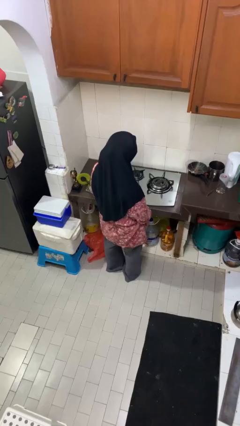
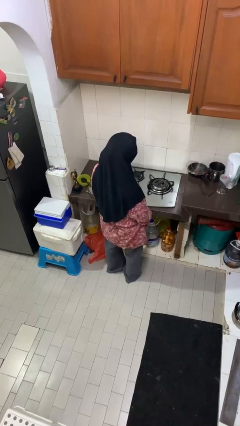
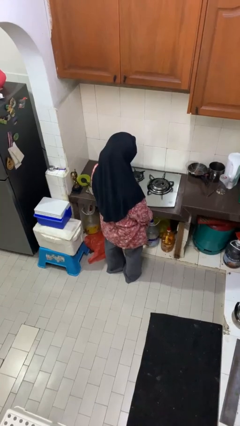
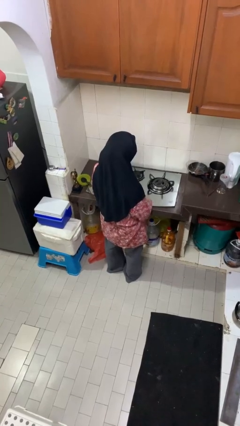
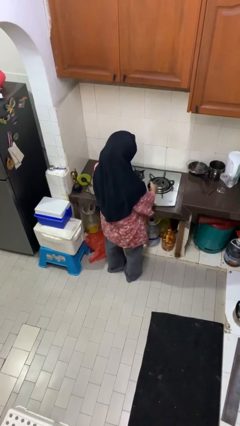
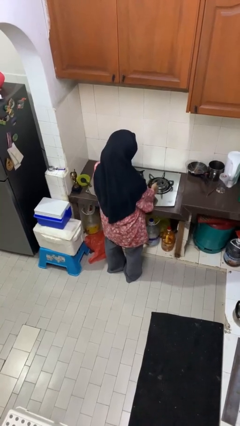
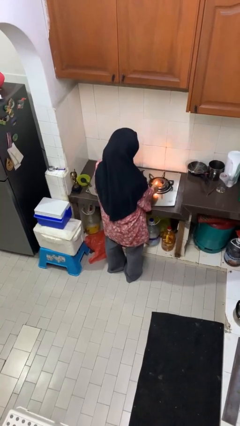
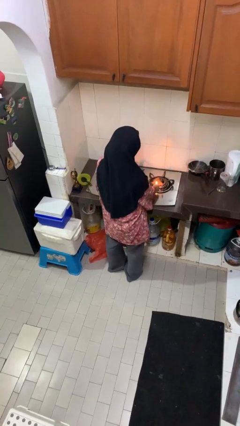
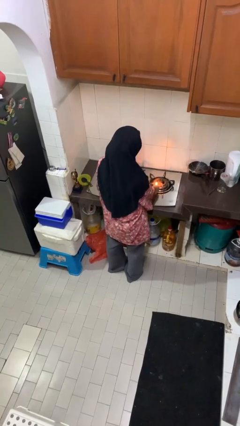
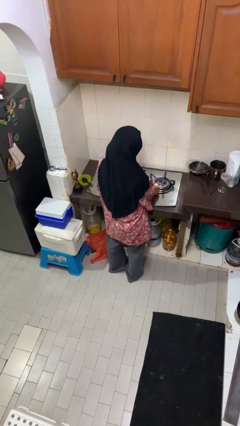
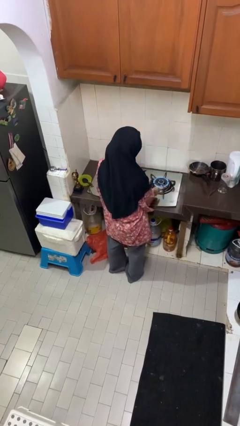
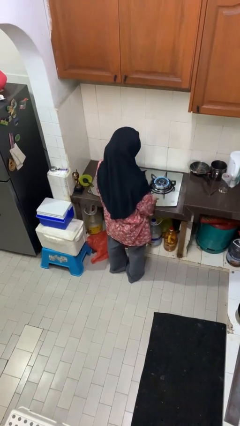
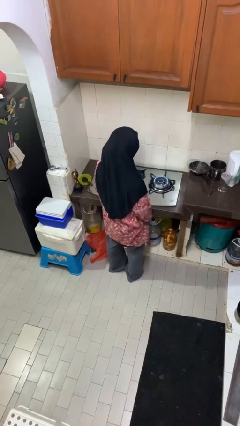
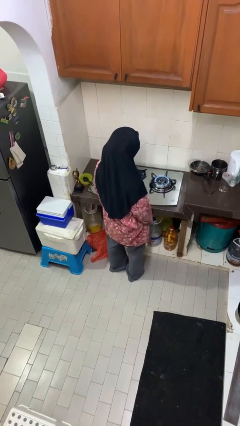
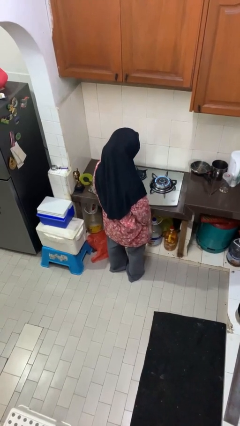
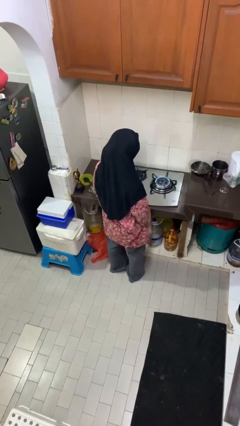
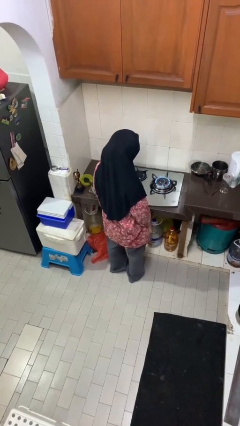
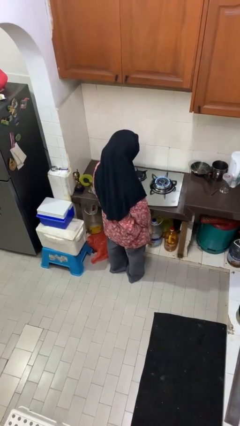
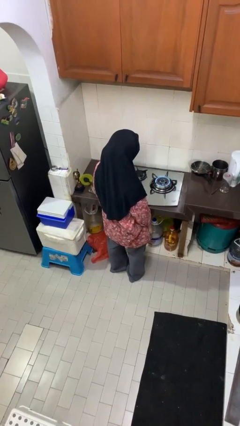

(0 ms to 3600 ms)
person turns on stovetop

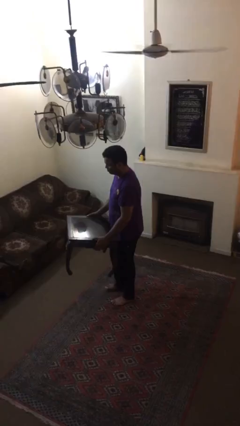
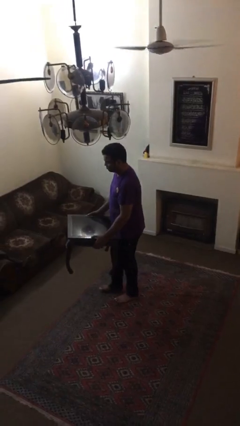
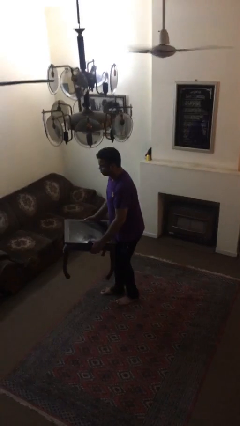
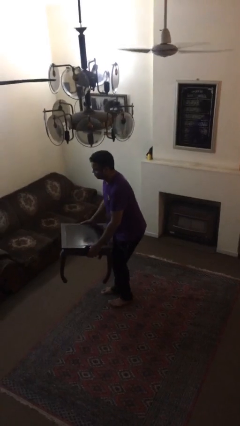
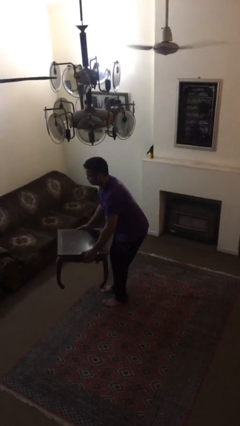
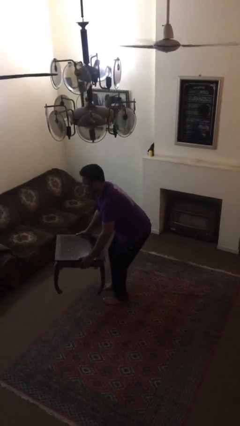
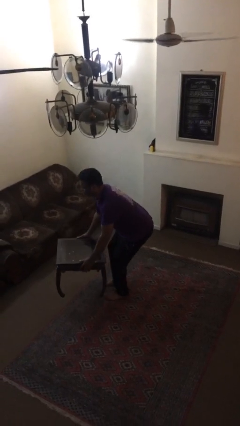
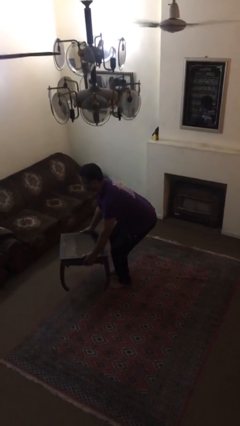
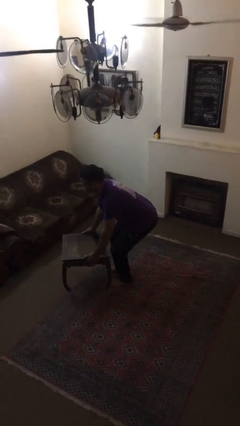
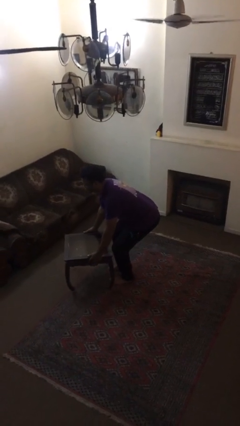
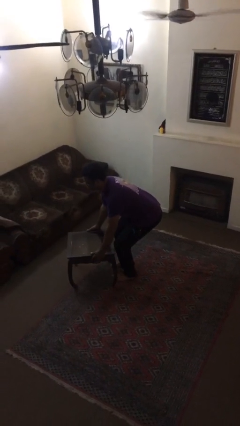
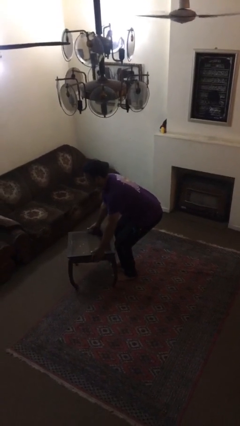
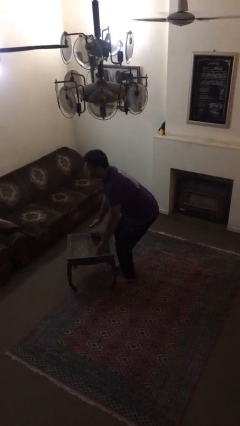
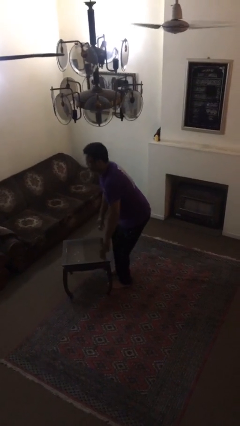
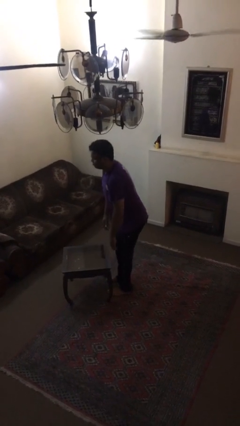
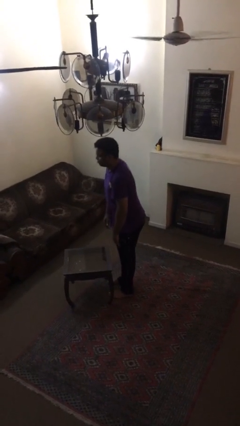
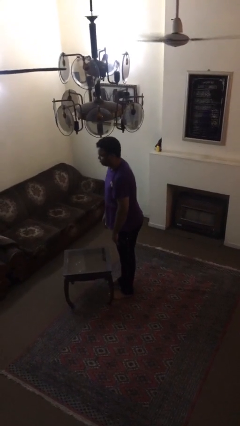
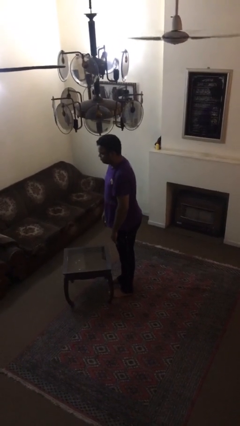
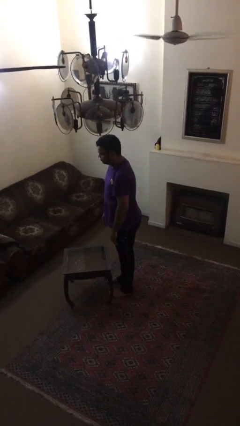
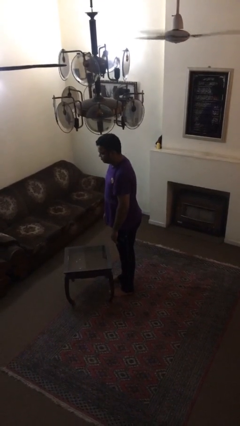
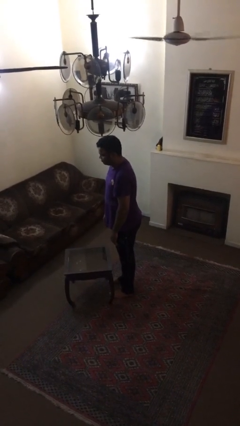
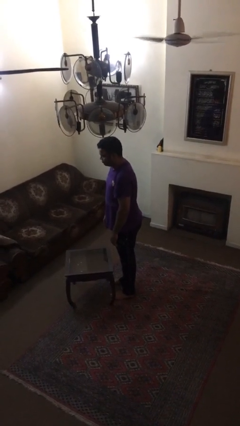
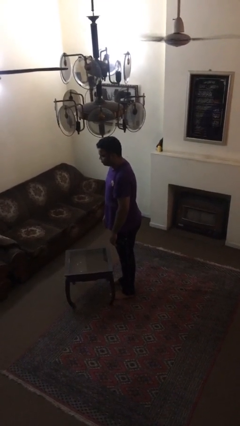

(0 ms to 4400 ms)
person puts down object on floor

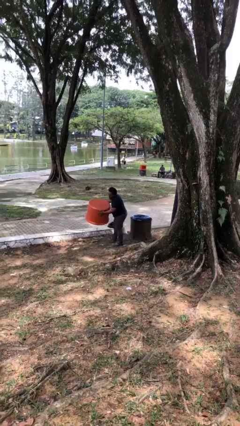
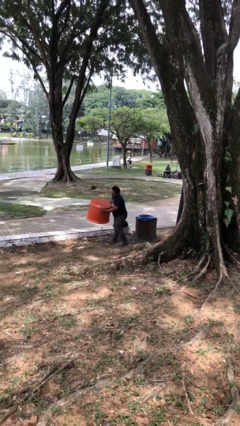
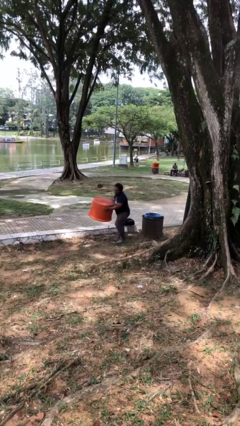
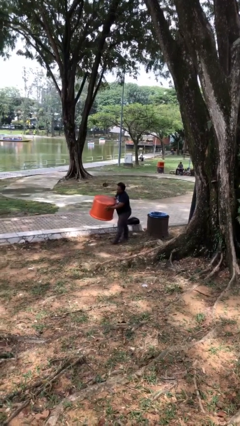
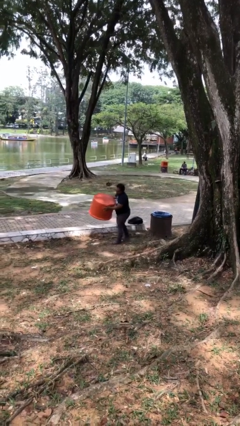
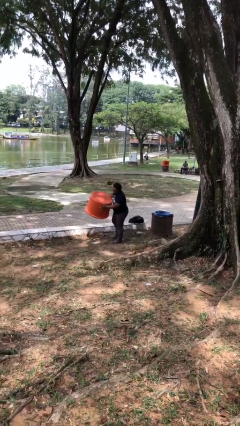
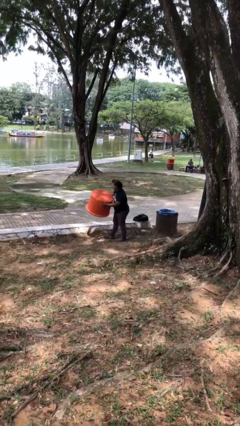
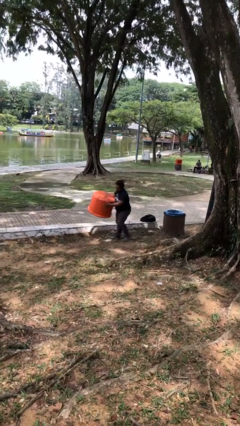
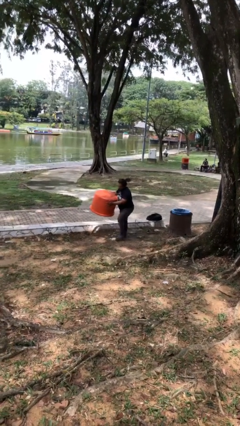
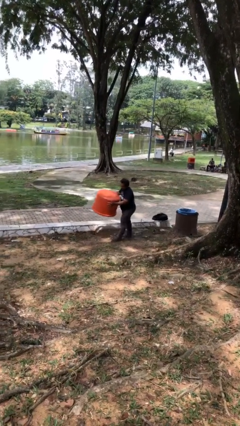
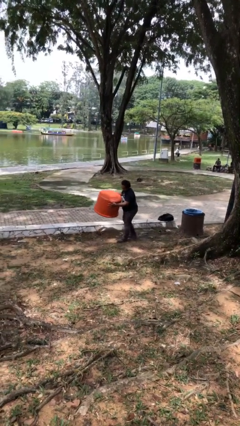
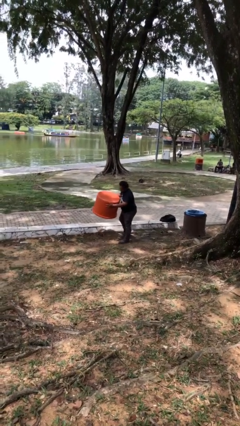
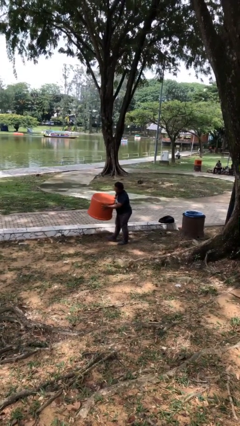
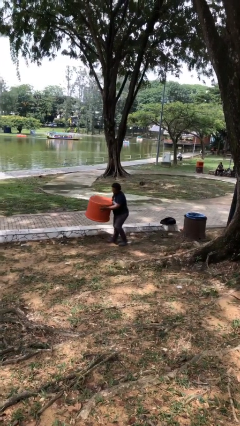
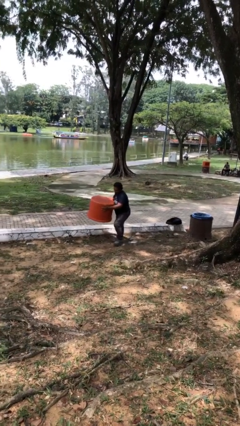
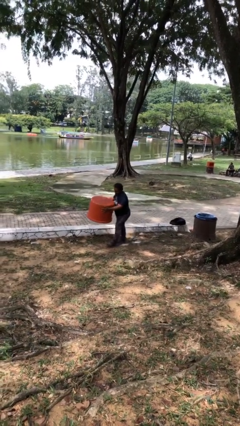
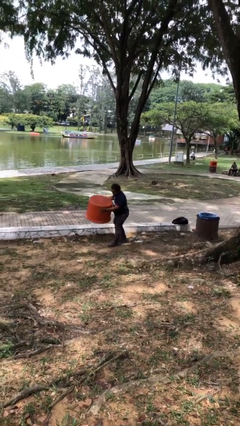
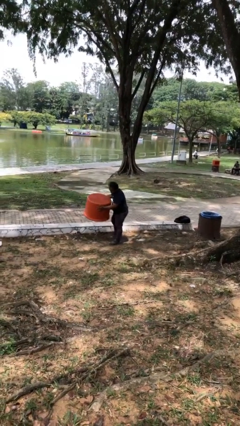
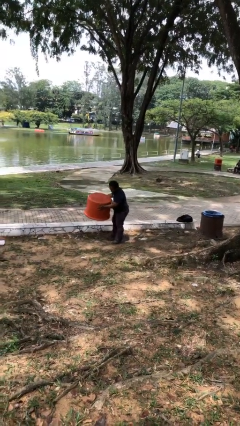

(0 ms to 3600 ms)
person carries heavy object

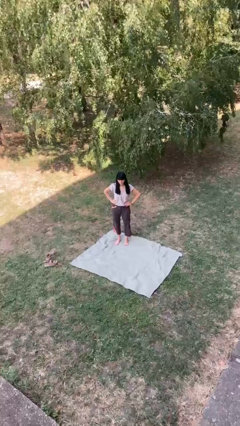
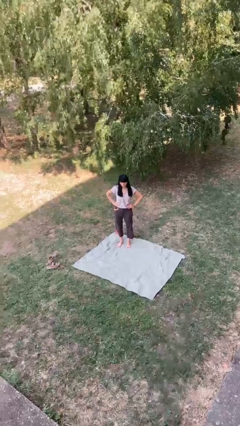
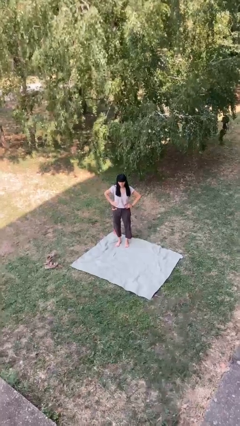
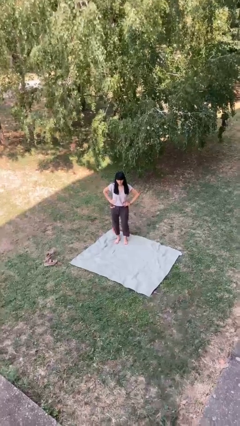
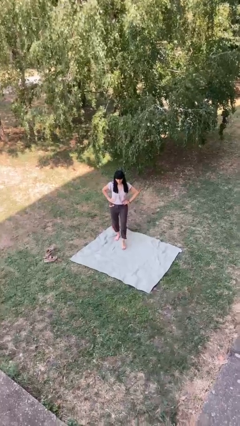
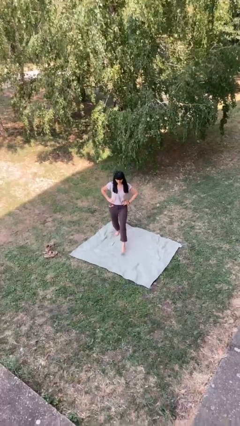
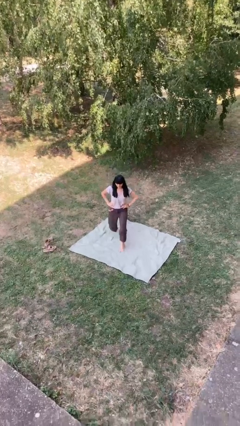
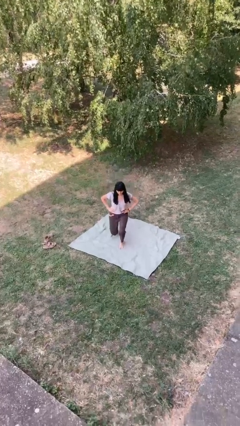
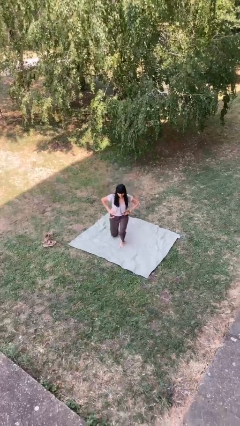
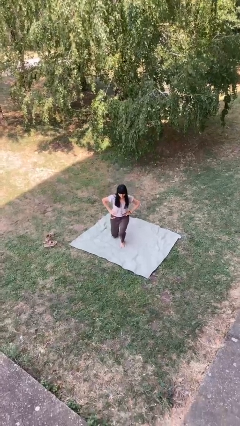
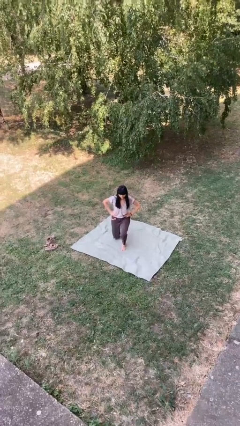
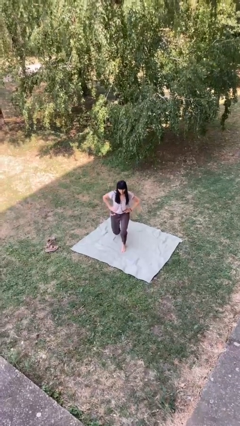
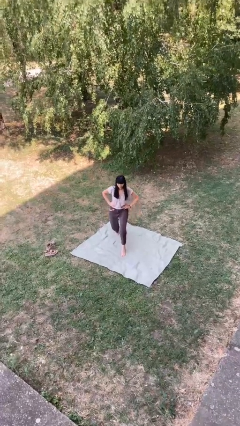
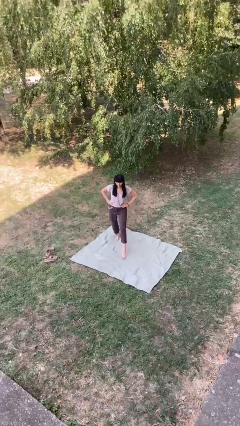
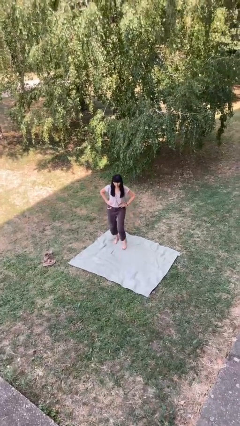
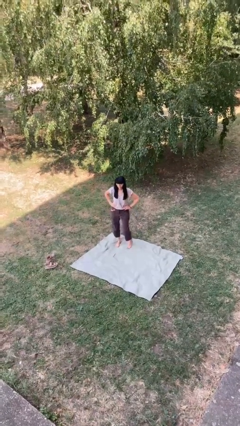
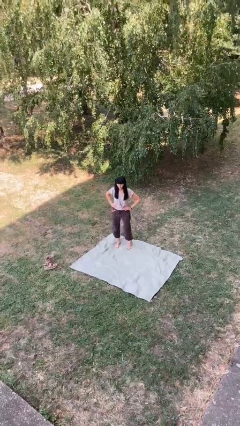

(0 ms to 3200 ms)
person exercises with lunges

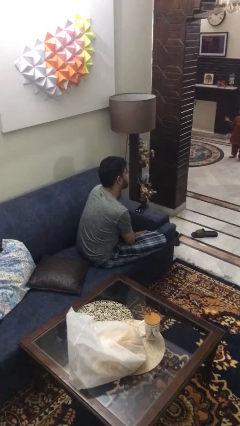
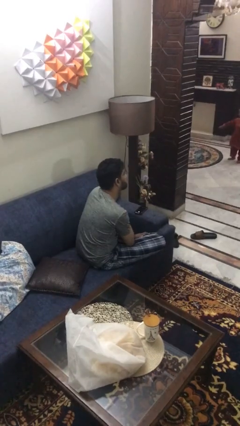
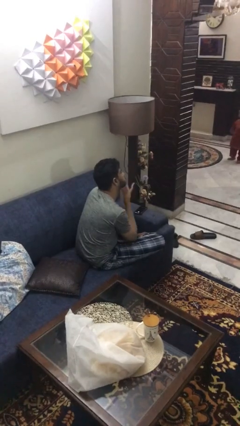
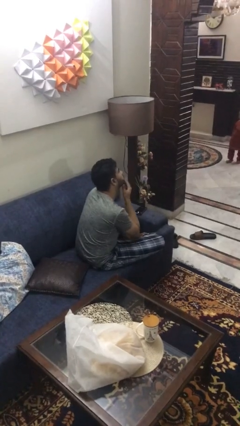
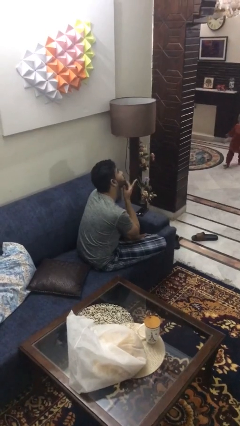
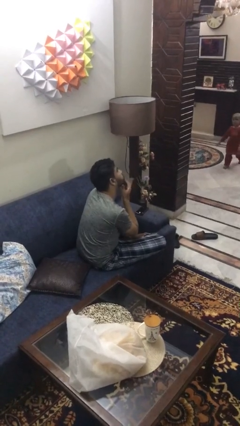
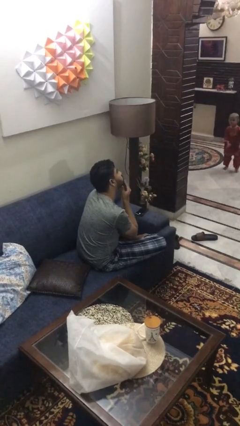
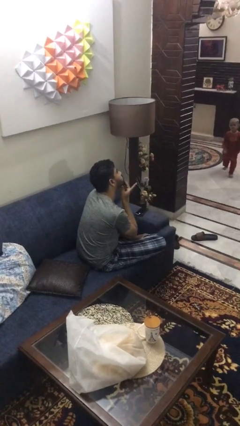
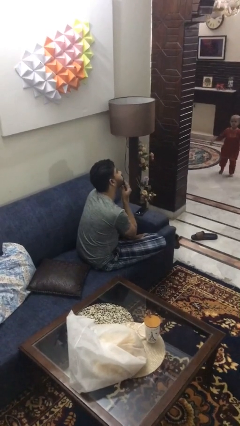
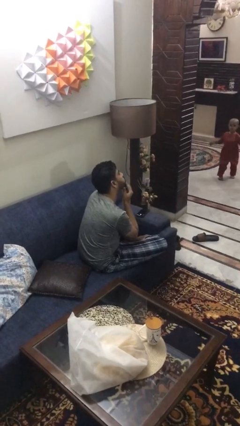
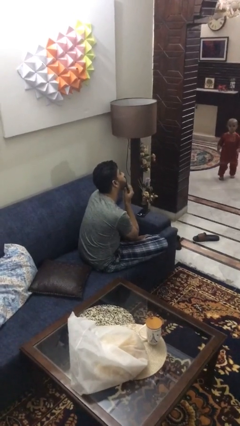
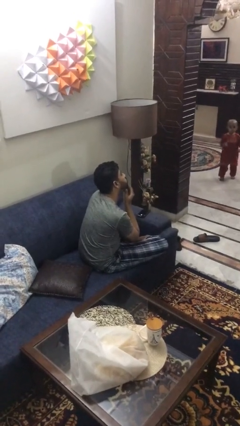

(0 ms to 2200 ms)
person strokes chin

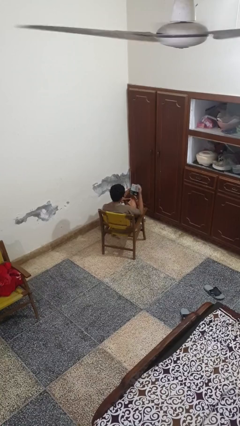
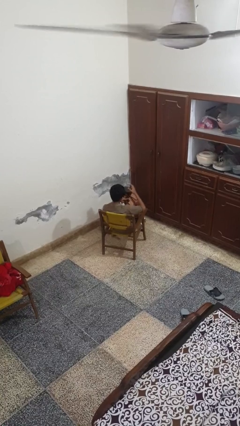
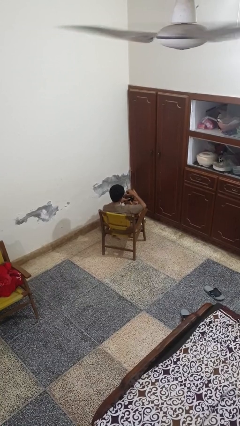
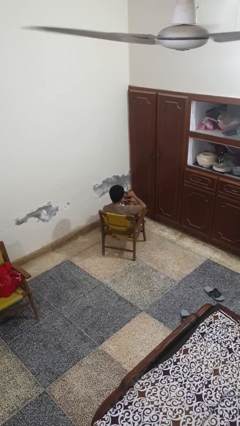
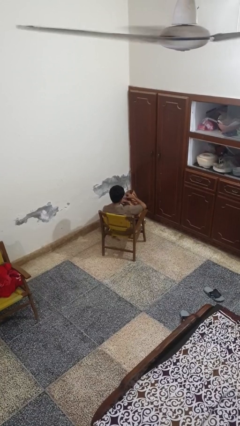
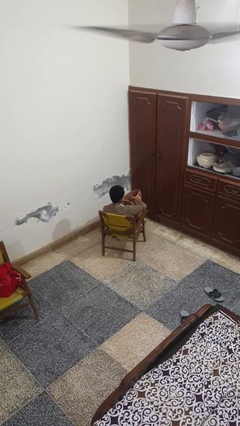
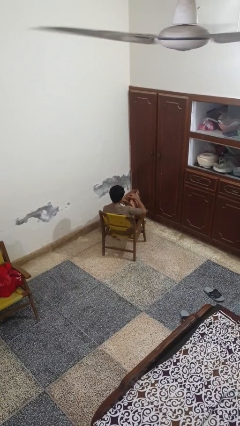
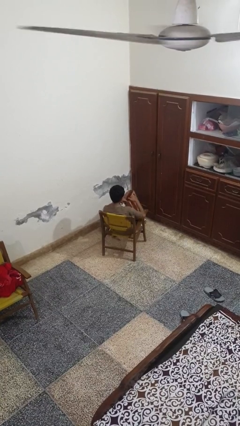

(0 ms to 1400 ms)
person puts object into bag
